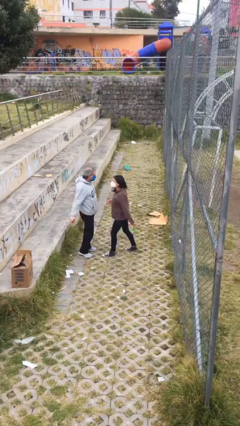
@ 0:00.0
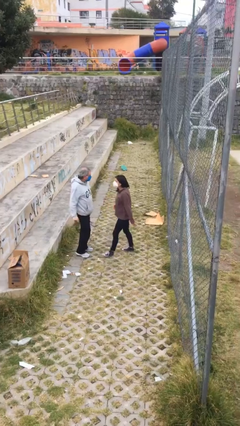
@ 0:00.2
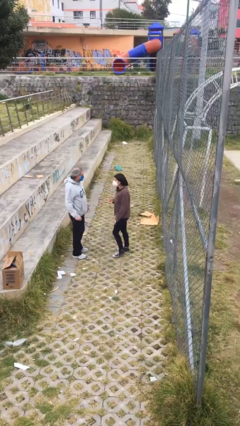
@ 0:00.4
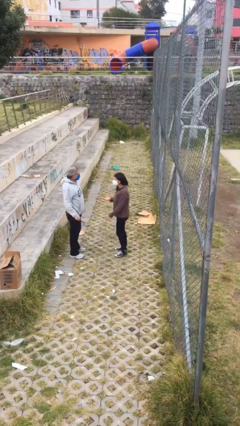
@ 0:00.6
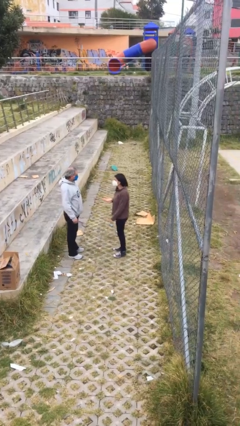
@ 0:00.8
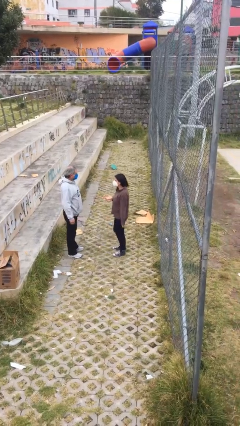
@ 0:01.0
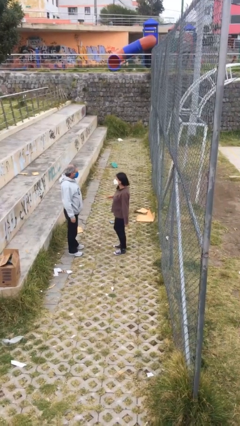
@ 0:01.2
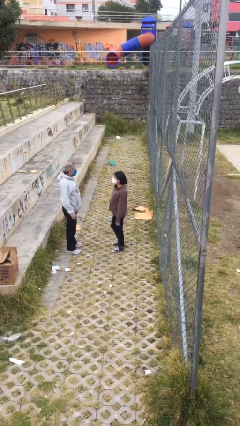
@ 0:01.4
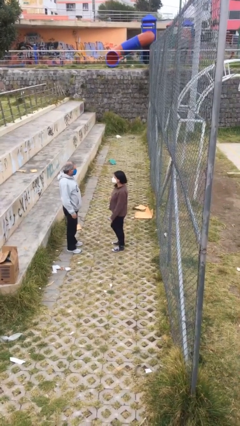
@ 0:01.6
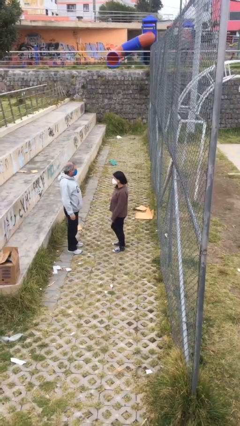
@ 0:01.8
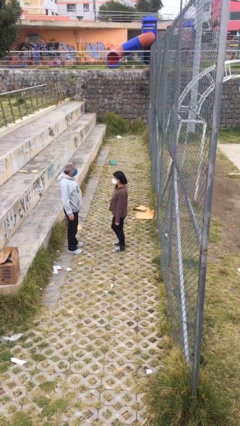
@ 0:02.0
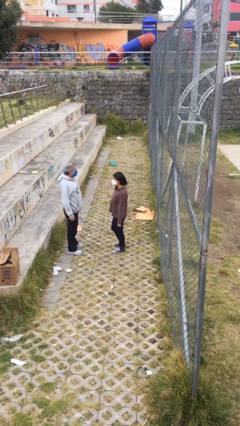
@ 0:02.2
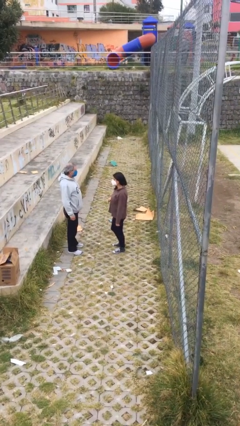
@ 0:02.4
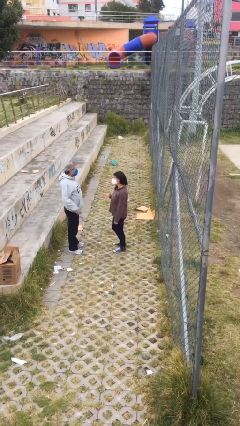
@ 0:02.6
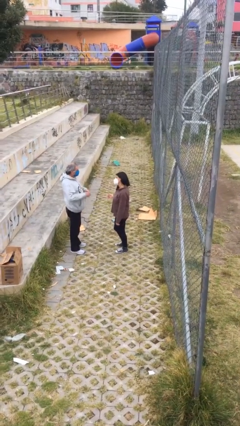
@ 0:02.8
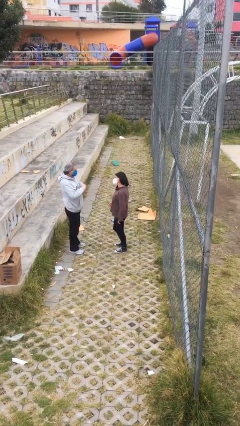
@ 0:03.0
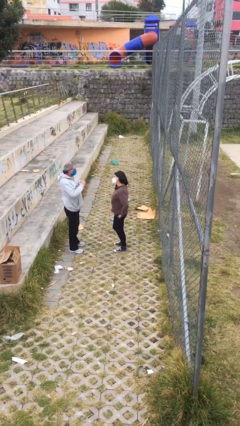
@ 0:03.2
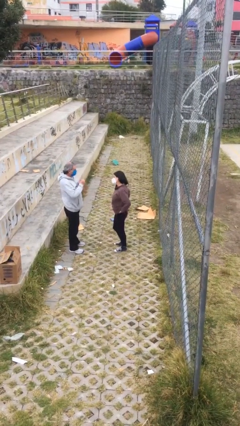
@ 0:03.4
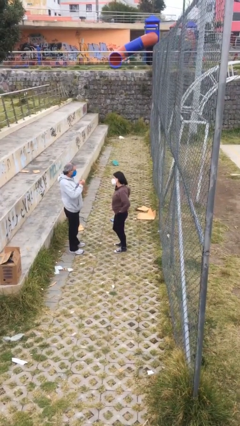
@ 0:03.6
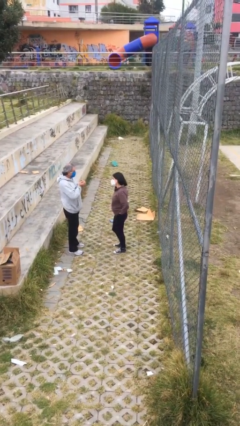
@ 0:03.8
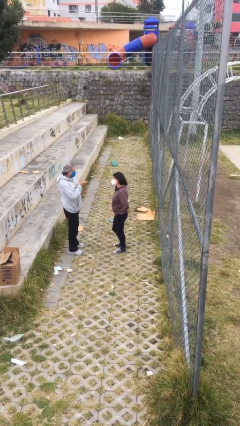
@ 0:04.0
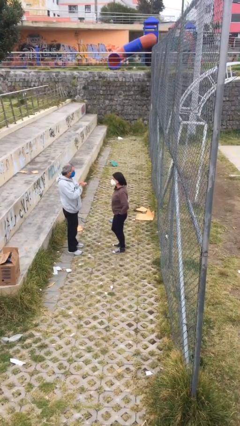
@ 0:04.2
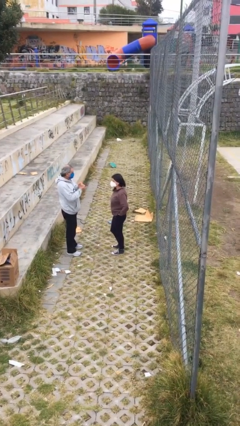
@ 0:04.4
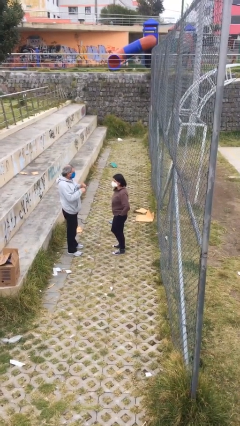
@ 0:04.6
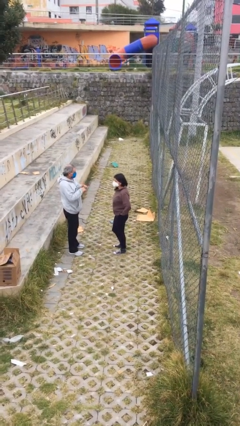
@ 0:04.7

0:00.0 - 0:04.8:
person talks to person

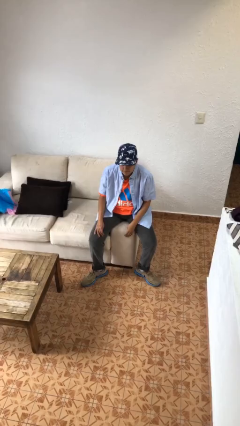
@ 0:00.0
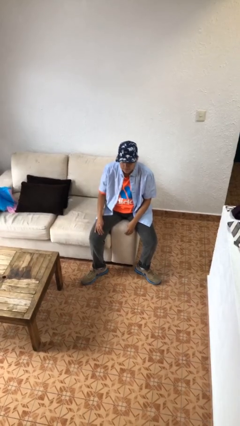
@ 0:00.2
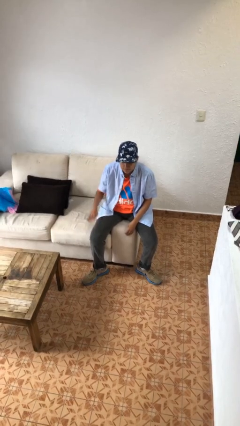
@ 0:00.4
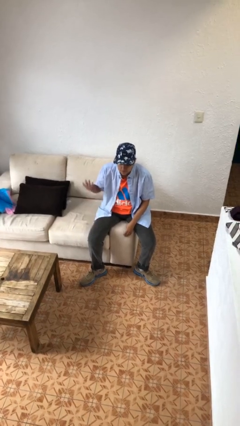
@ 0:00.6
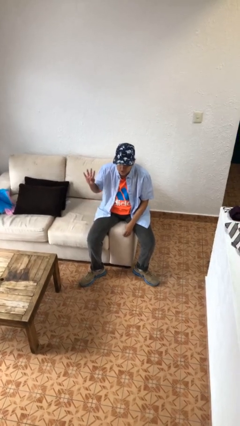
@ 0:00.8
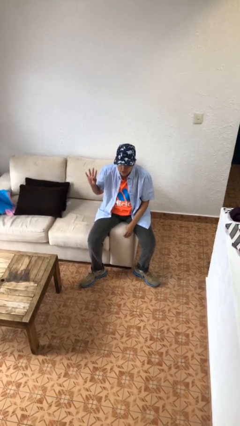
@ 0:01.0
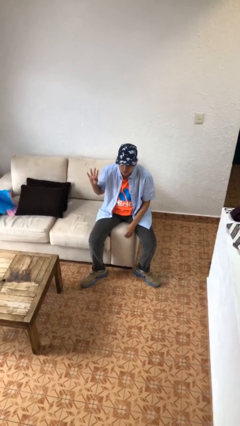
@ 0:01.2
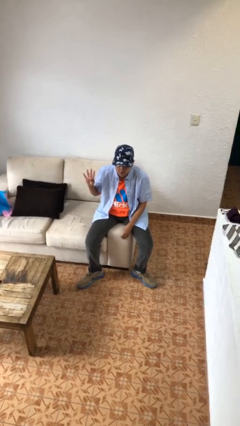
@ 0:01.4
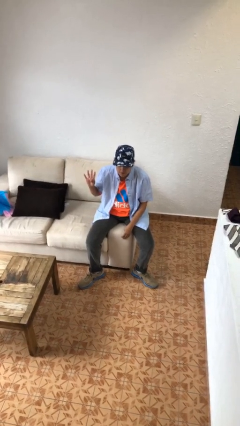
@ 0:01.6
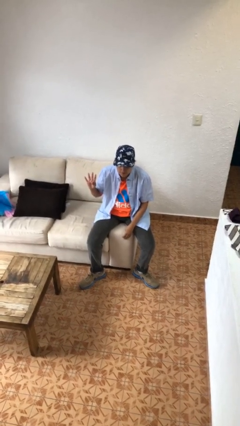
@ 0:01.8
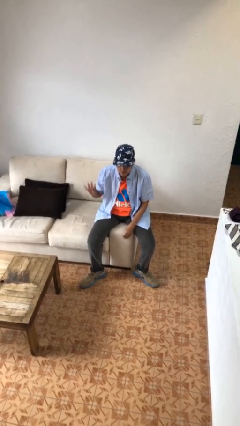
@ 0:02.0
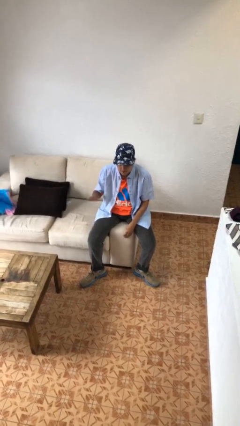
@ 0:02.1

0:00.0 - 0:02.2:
person gestures number four

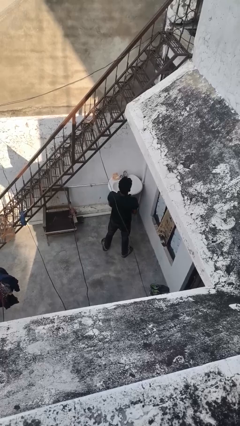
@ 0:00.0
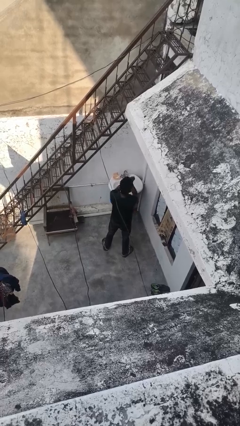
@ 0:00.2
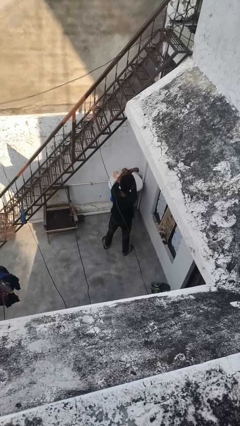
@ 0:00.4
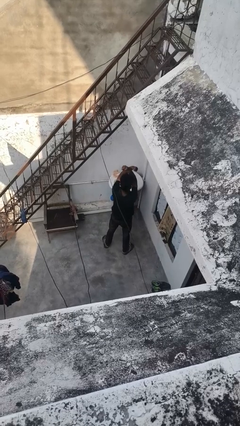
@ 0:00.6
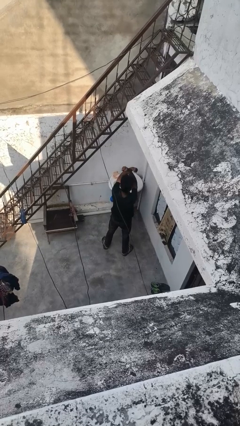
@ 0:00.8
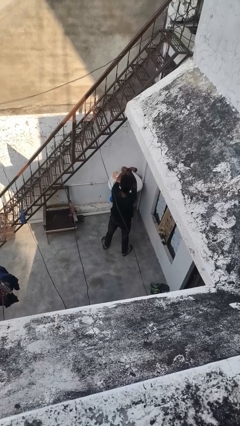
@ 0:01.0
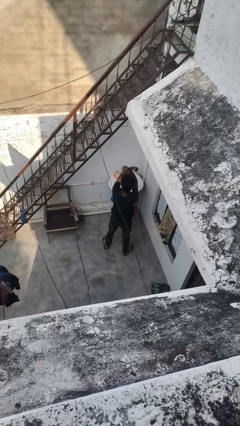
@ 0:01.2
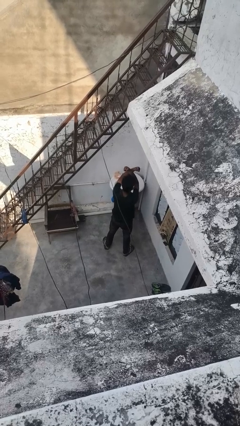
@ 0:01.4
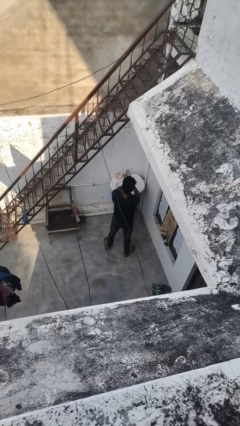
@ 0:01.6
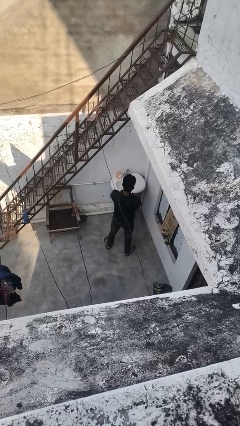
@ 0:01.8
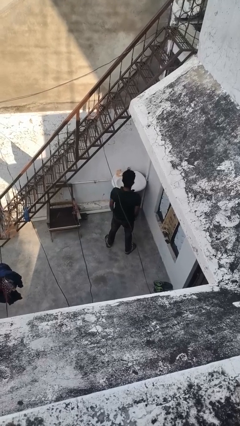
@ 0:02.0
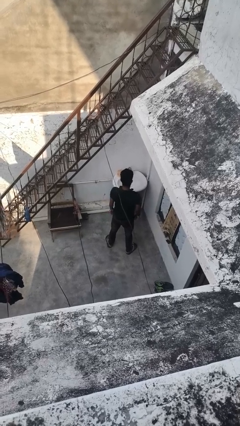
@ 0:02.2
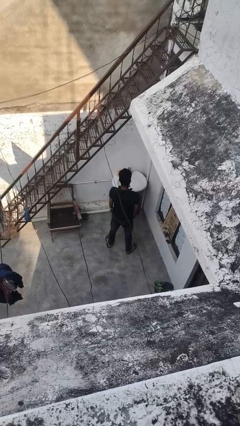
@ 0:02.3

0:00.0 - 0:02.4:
person gestures arms x

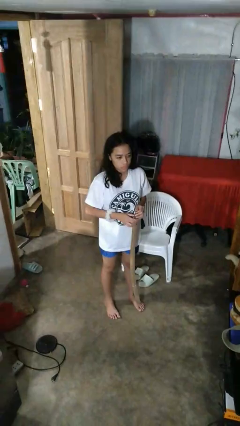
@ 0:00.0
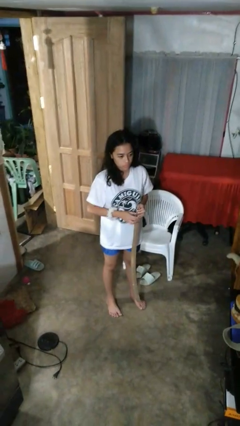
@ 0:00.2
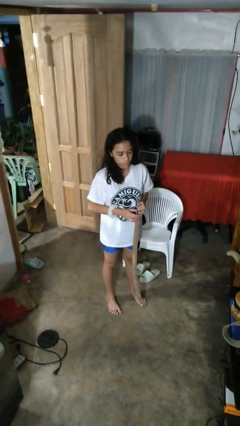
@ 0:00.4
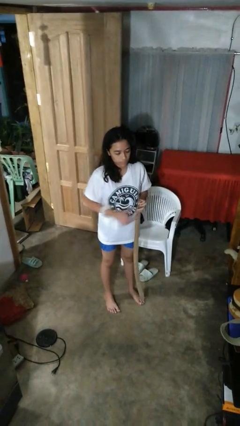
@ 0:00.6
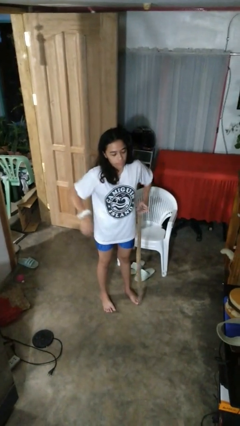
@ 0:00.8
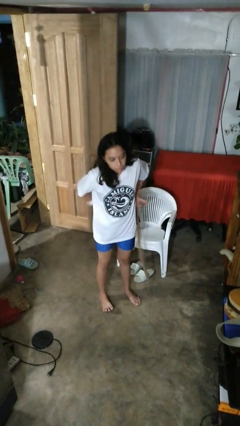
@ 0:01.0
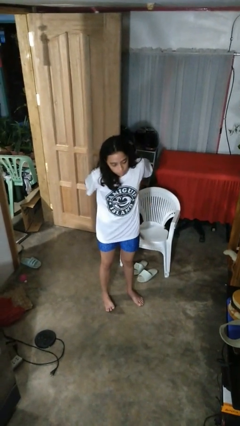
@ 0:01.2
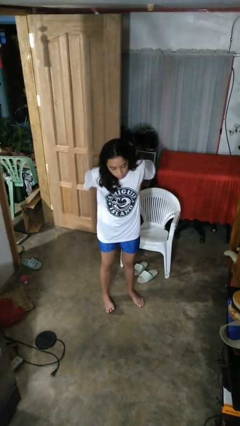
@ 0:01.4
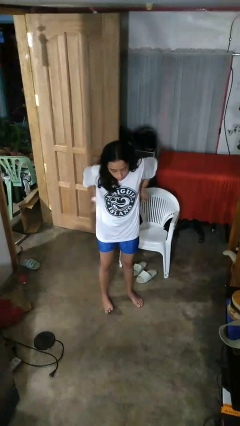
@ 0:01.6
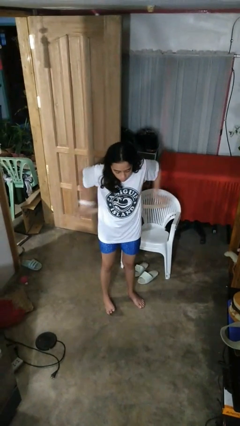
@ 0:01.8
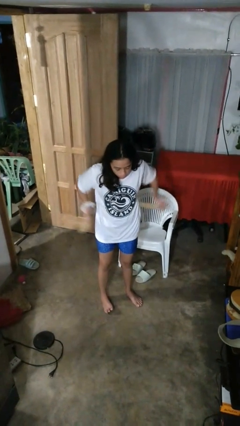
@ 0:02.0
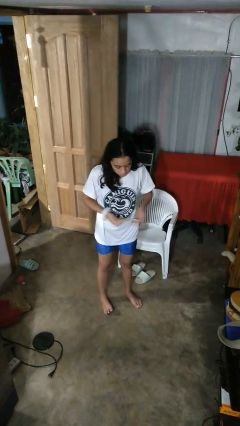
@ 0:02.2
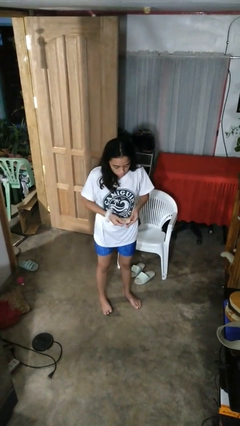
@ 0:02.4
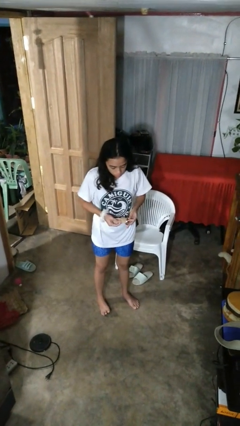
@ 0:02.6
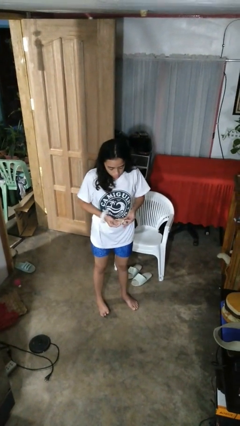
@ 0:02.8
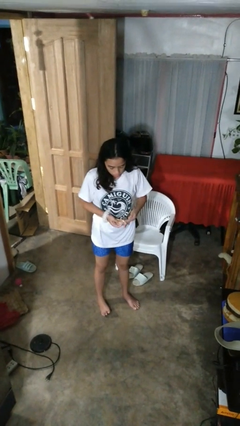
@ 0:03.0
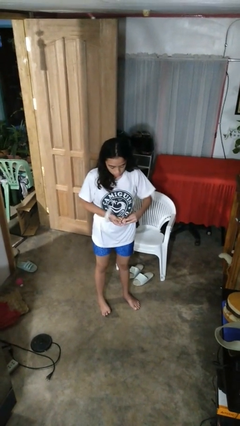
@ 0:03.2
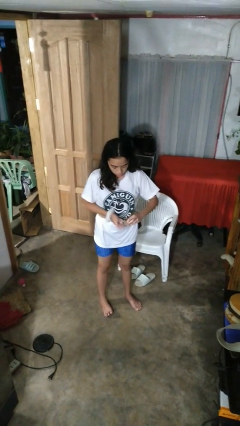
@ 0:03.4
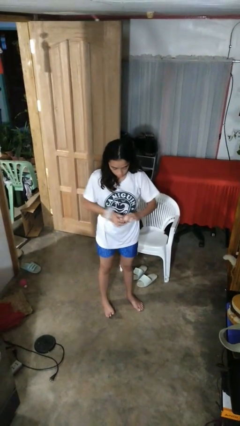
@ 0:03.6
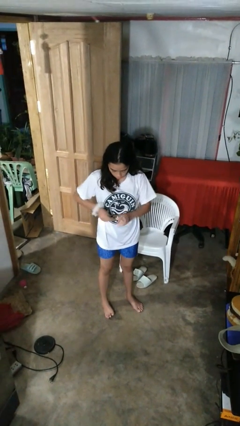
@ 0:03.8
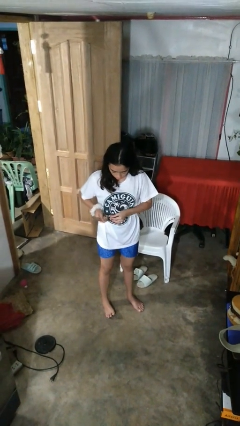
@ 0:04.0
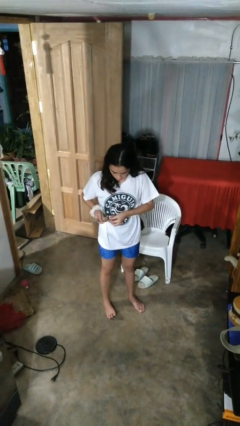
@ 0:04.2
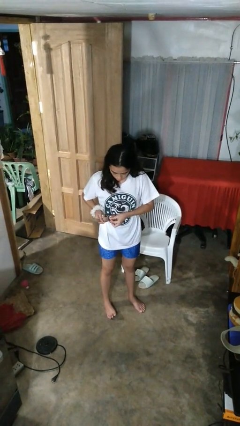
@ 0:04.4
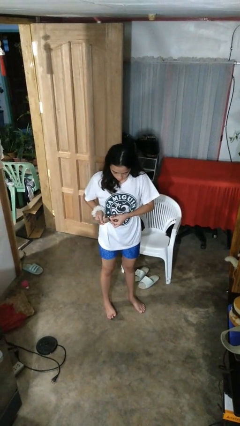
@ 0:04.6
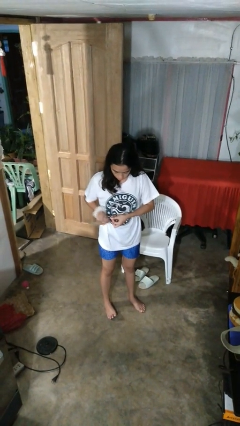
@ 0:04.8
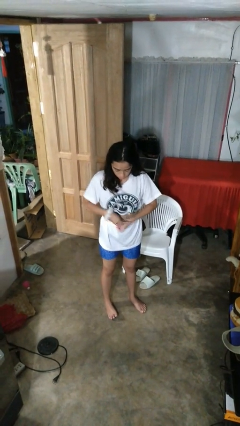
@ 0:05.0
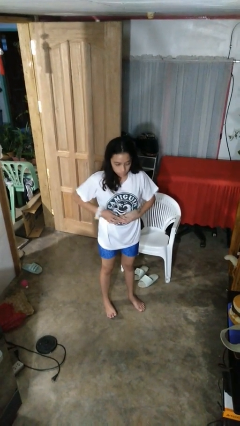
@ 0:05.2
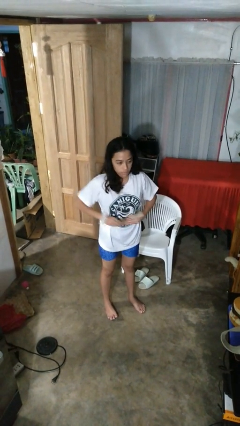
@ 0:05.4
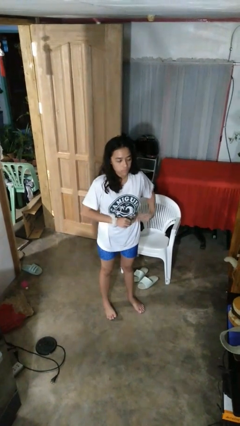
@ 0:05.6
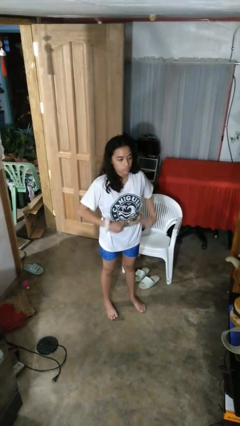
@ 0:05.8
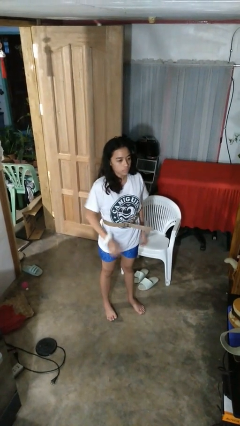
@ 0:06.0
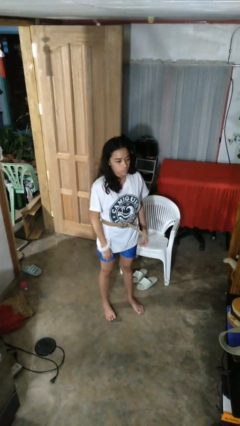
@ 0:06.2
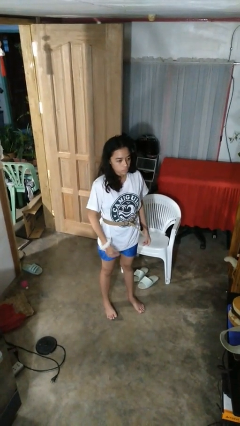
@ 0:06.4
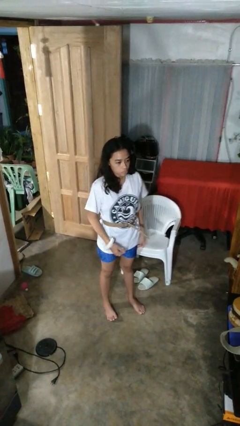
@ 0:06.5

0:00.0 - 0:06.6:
person puts on belt

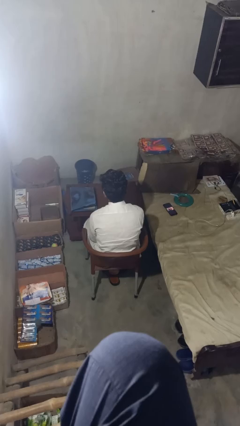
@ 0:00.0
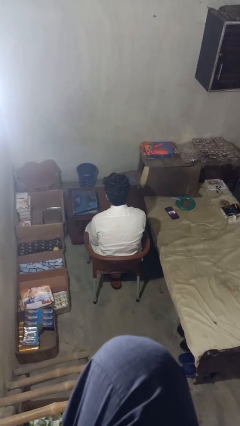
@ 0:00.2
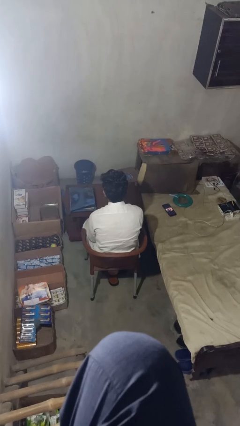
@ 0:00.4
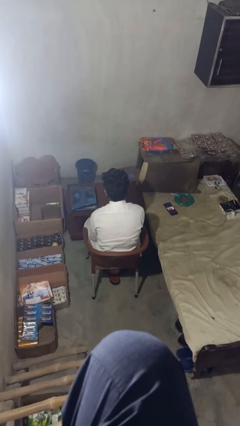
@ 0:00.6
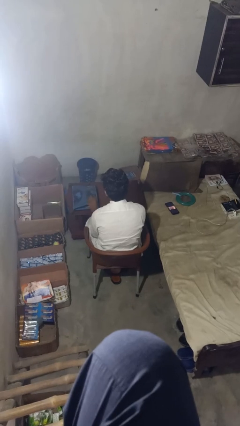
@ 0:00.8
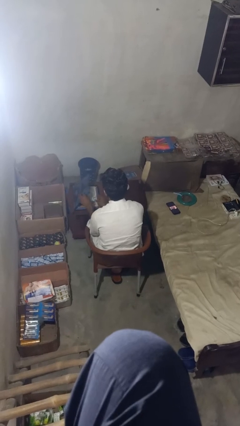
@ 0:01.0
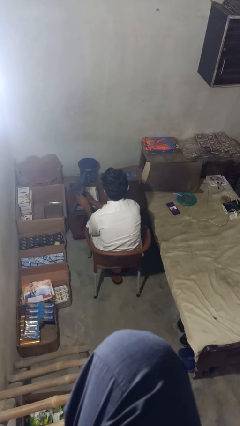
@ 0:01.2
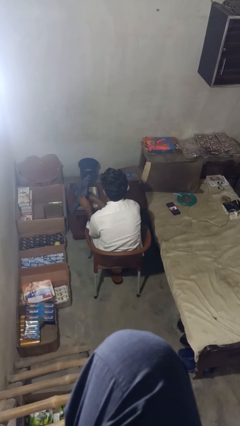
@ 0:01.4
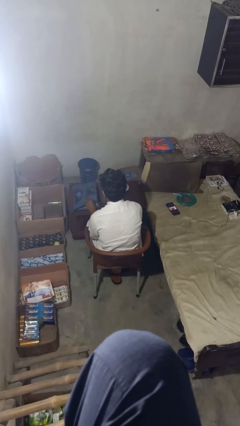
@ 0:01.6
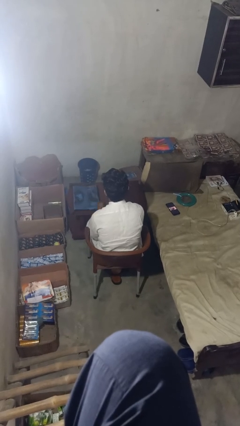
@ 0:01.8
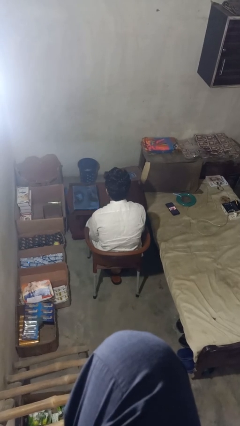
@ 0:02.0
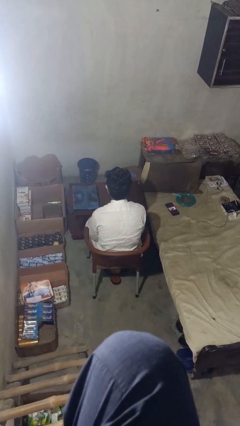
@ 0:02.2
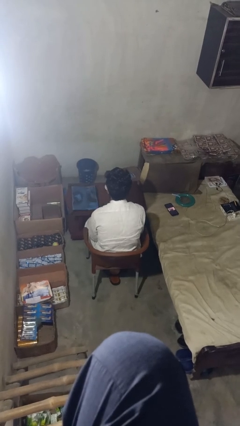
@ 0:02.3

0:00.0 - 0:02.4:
person puts object into bag
